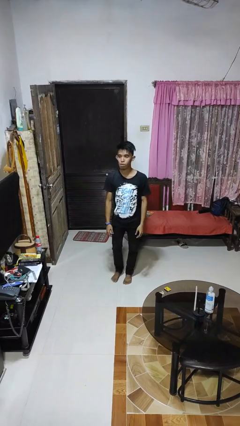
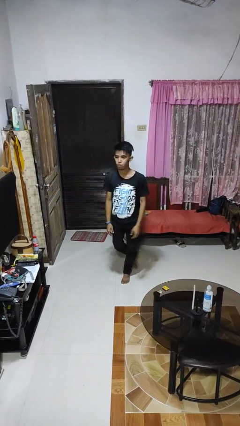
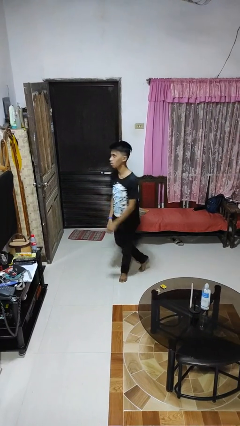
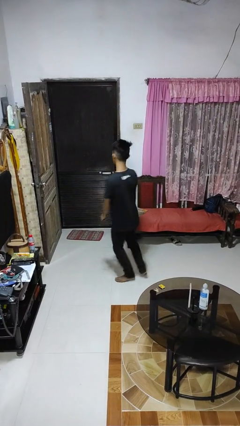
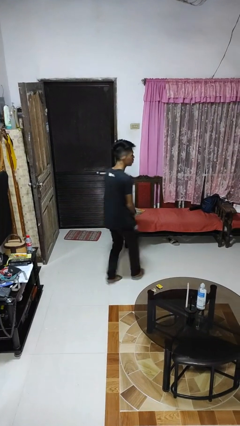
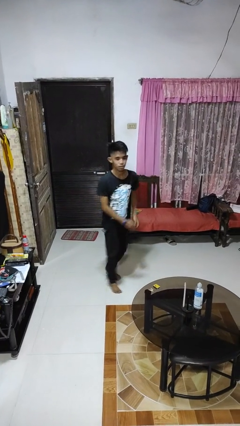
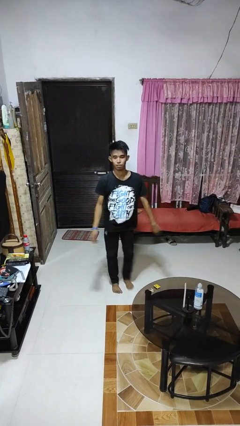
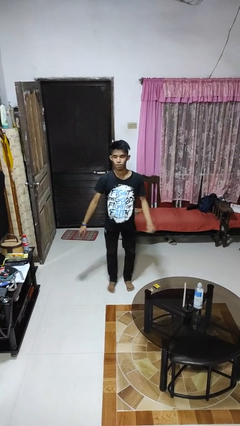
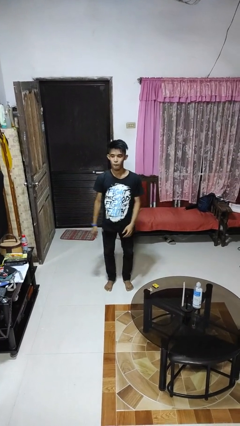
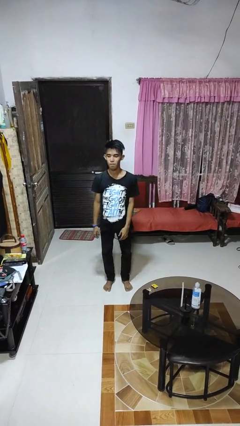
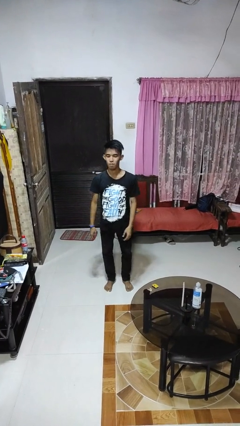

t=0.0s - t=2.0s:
person twirls

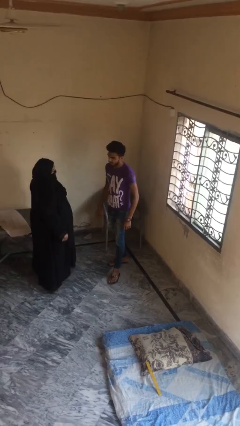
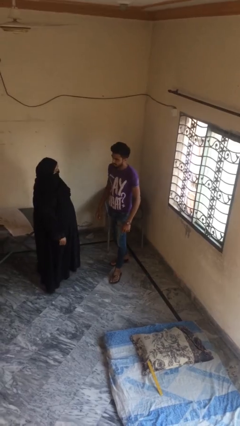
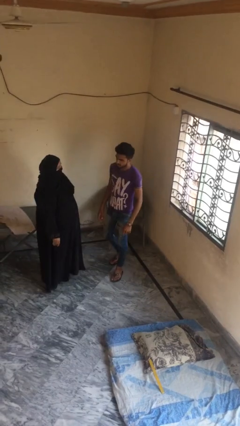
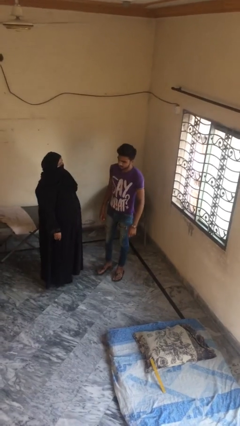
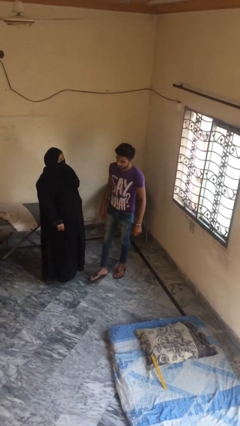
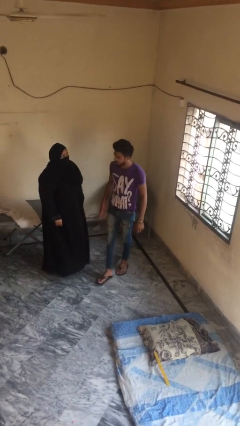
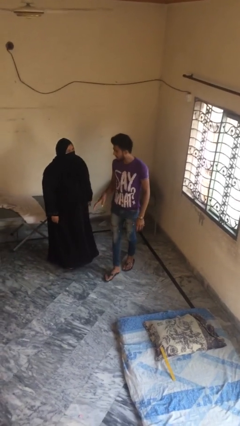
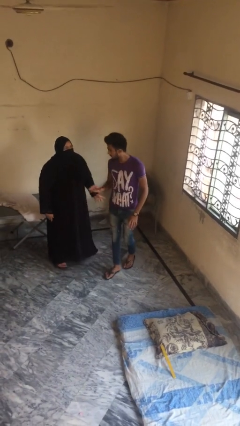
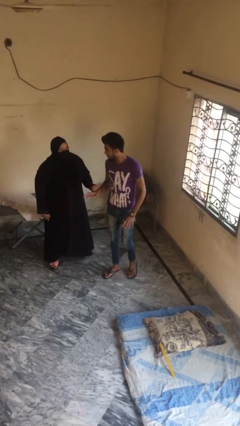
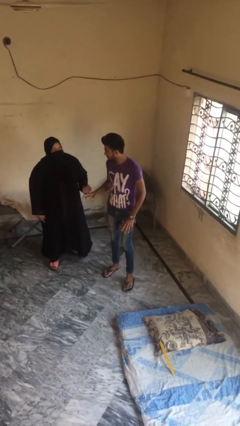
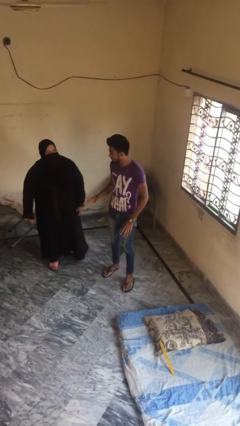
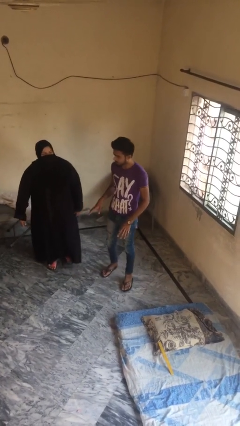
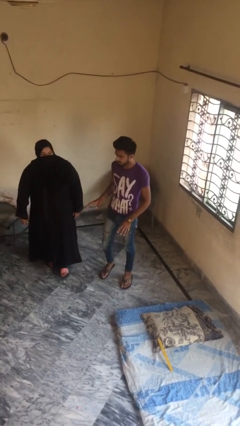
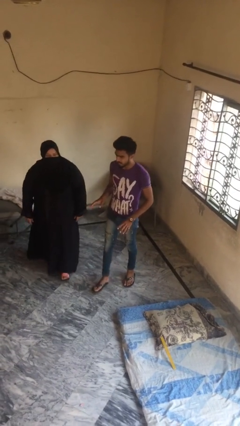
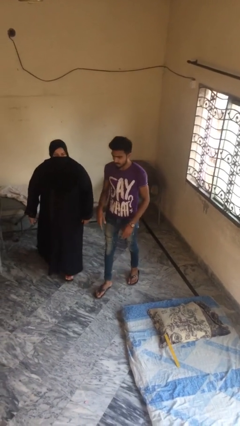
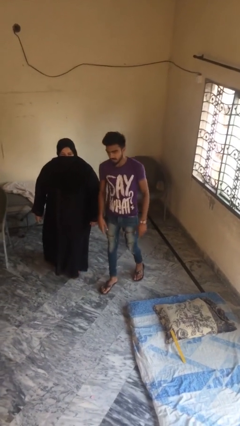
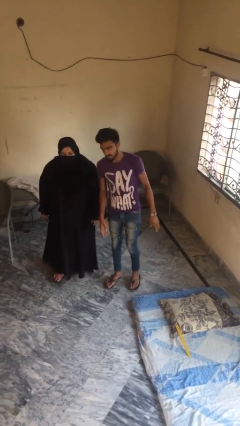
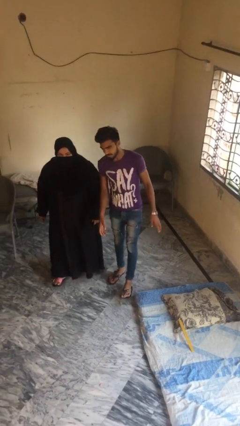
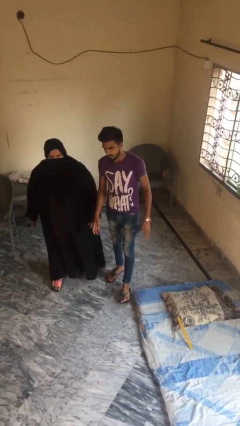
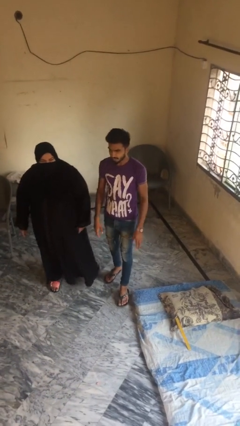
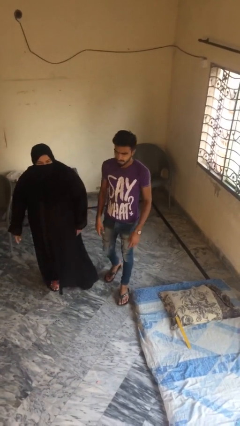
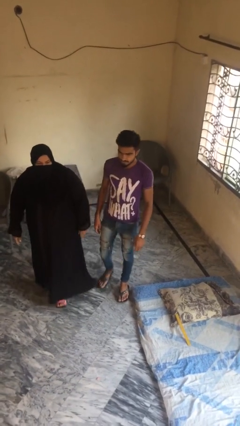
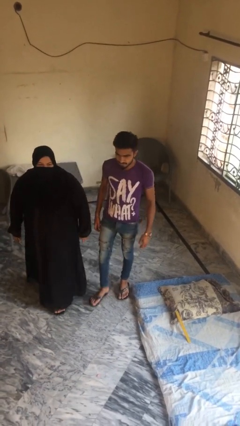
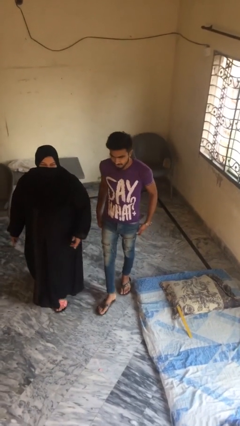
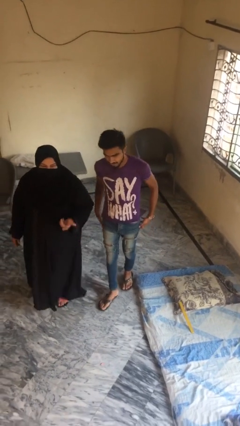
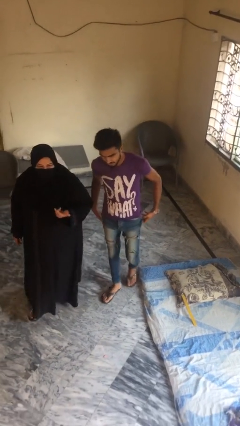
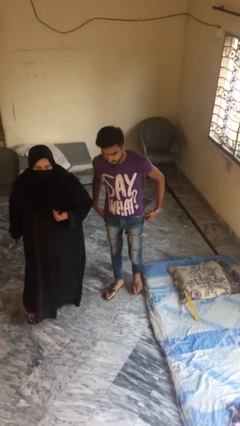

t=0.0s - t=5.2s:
person talks to person

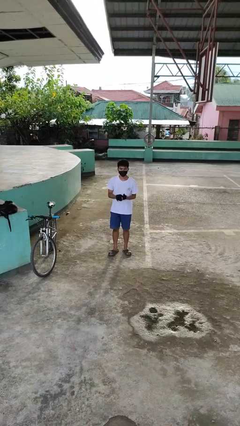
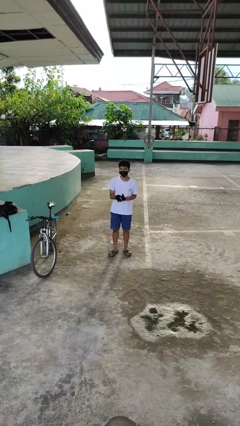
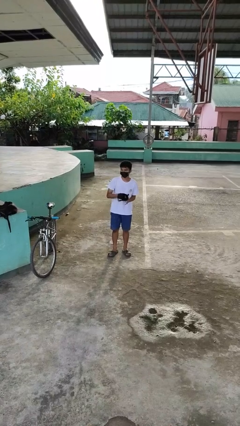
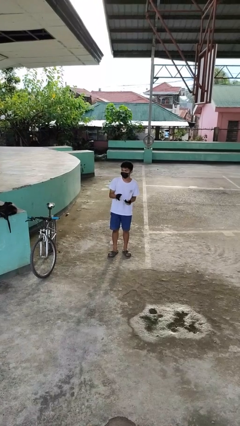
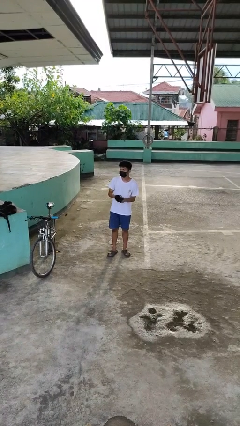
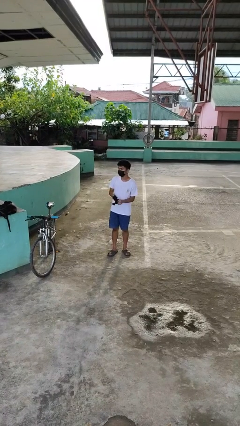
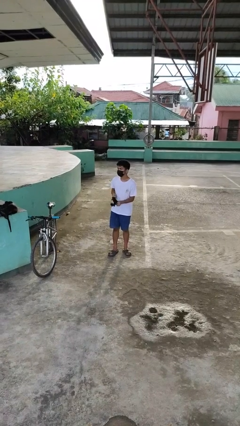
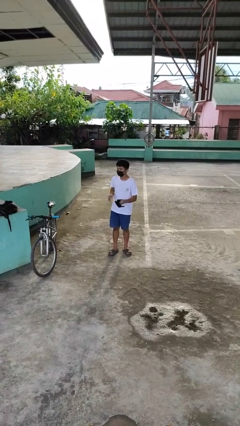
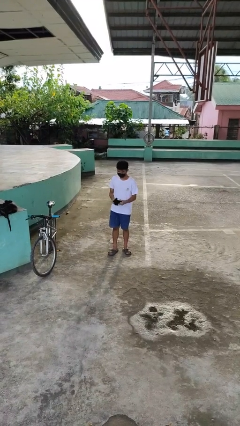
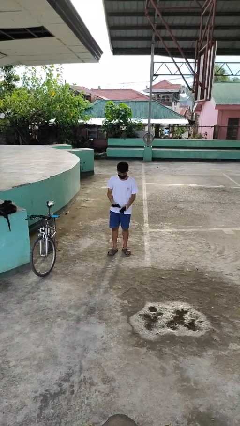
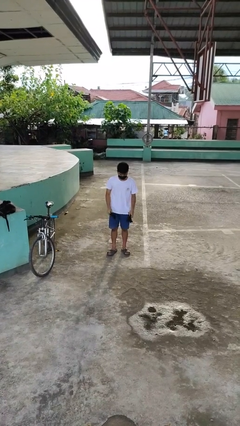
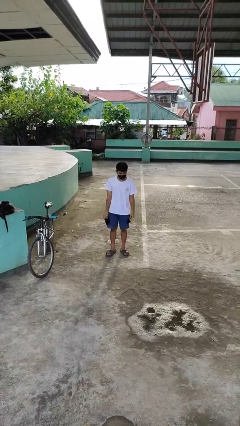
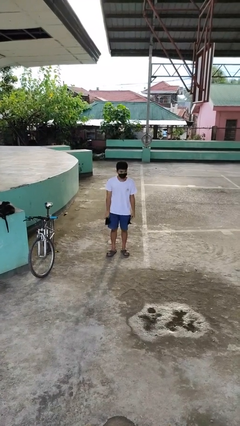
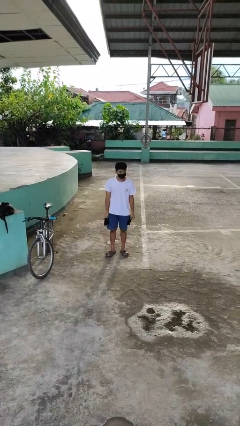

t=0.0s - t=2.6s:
person takes off gloves

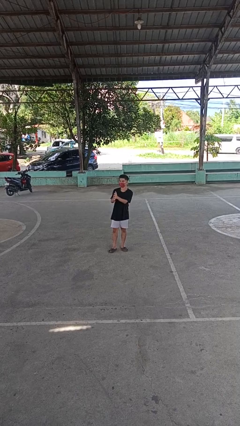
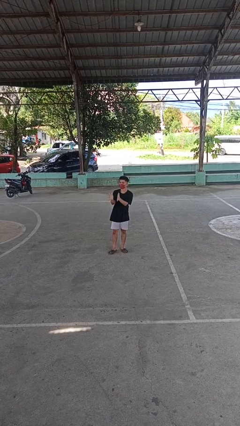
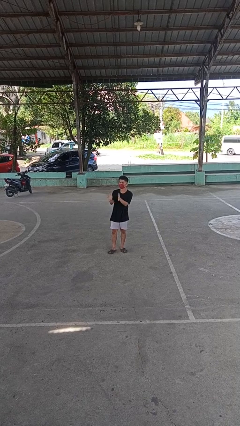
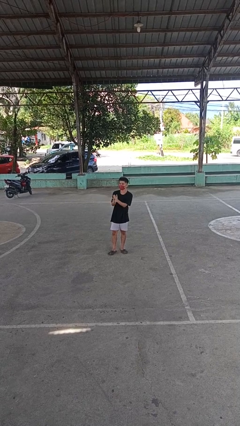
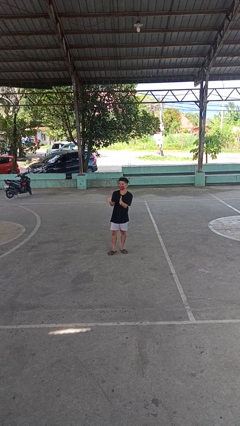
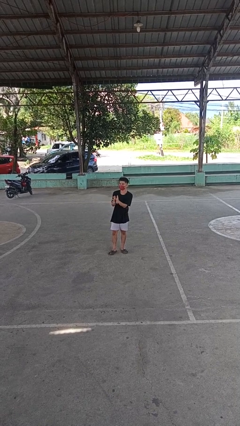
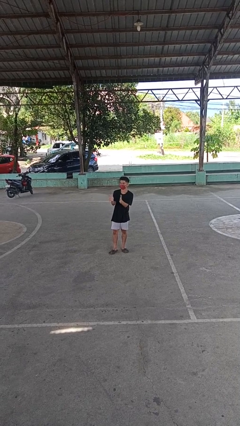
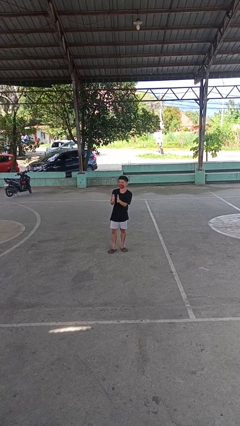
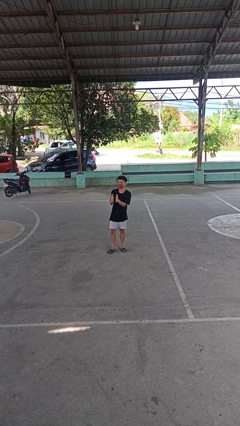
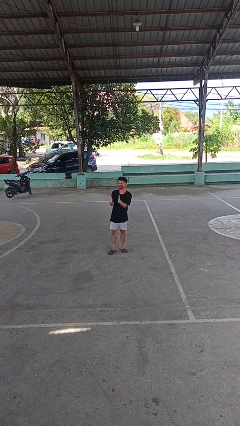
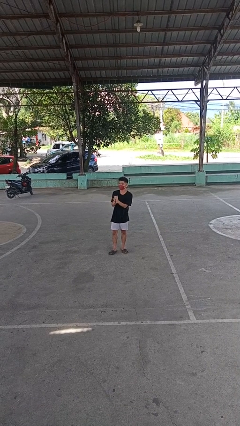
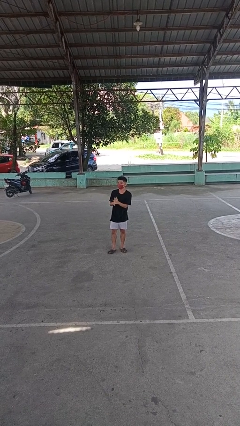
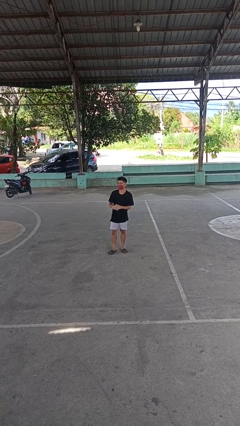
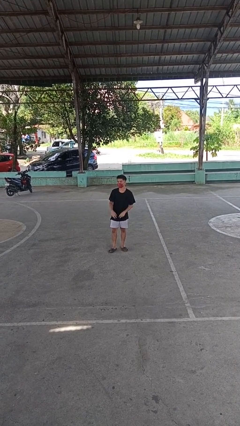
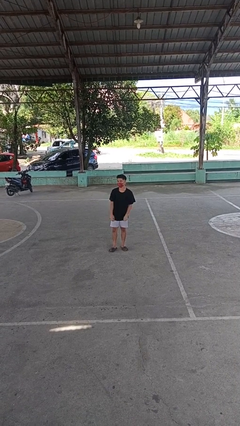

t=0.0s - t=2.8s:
person claps hands

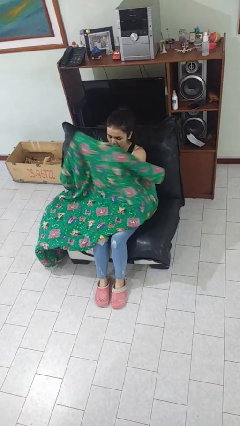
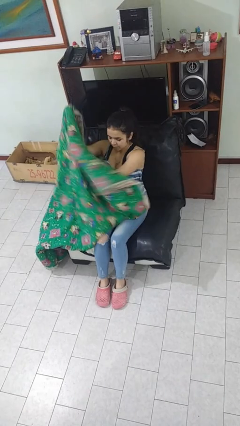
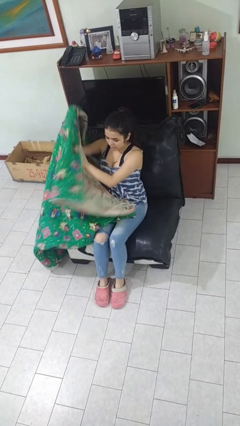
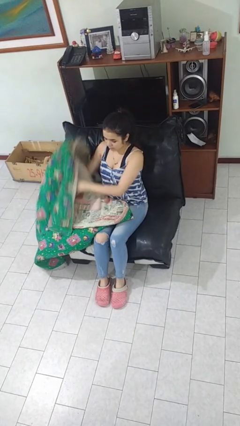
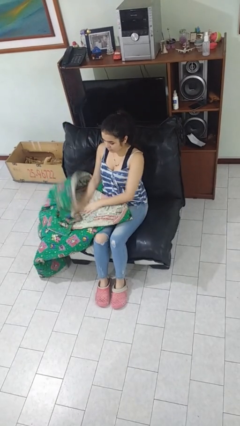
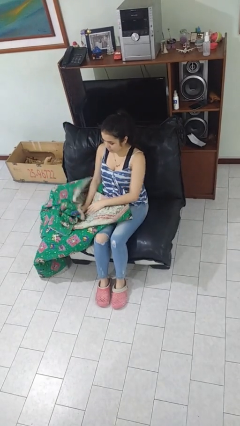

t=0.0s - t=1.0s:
person uncovers with blanket

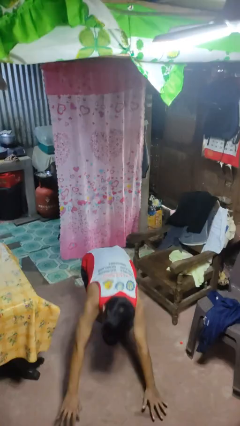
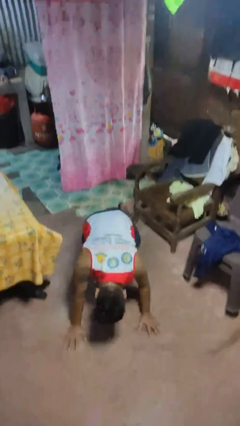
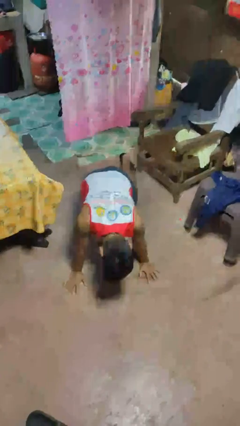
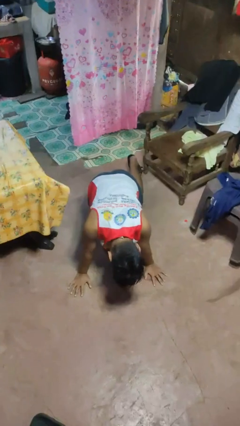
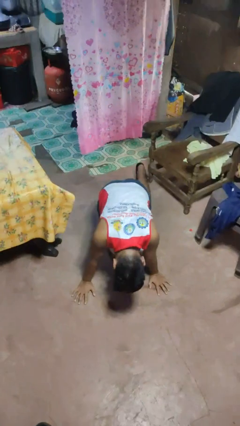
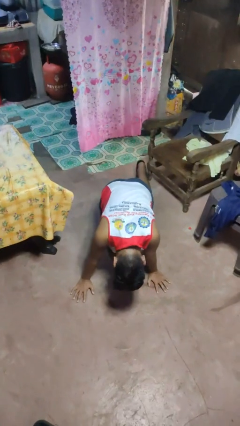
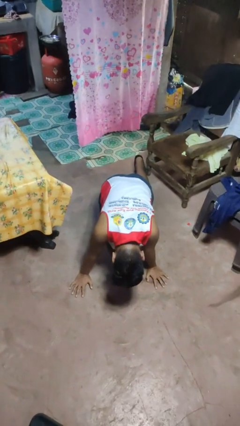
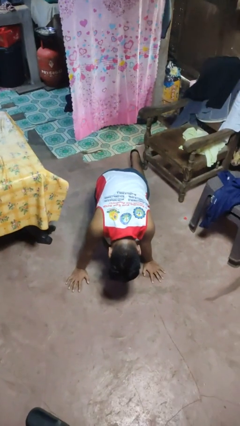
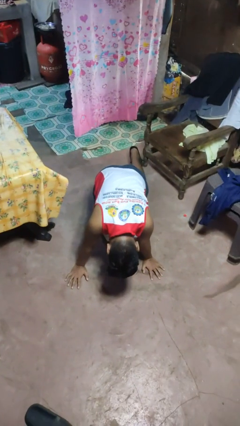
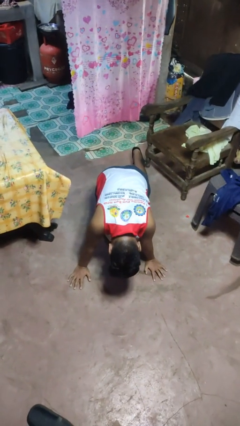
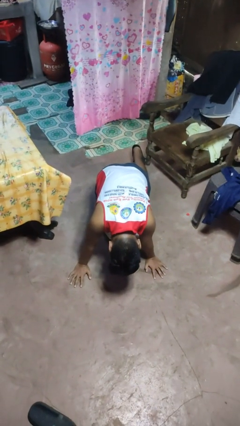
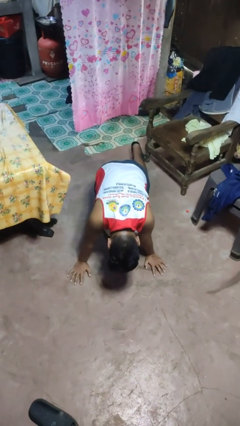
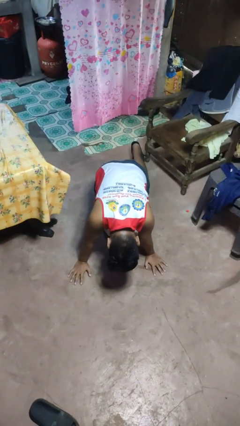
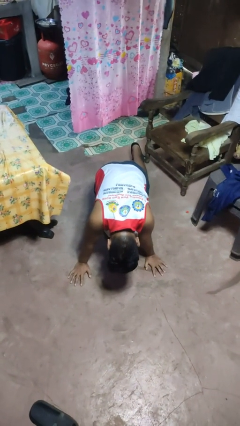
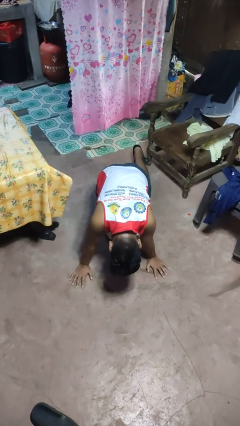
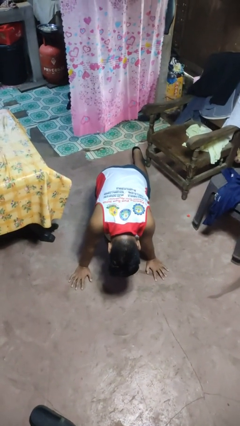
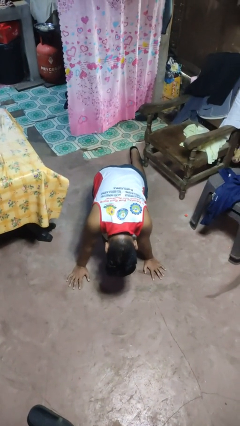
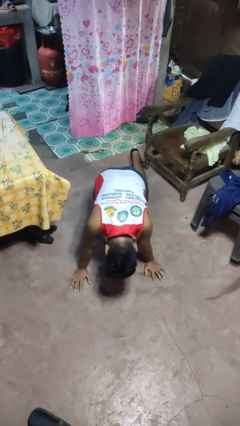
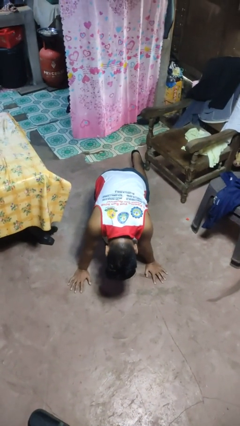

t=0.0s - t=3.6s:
person lies down on floor
